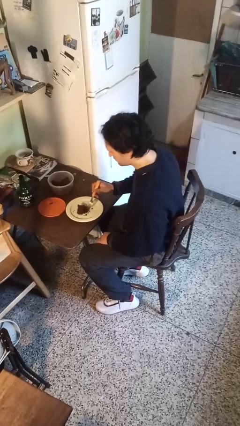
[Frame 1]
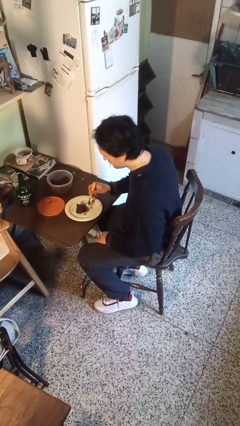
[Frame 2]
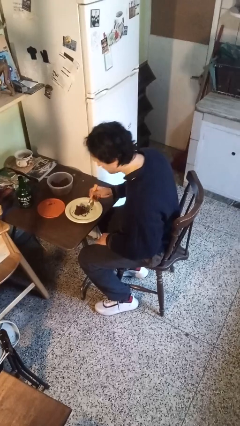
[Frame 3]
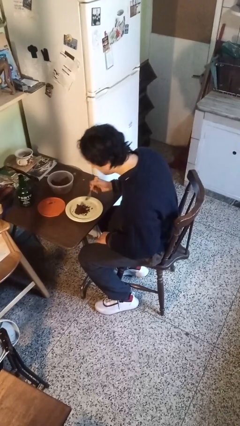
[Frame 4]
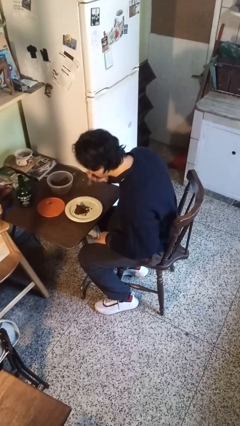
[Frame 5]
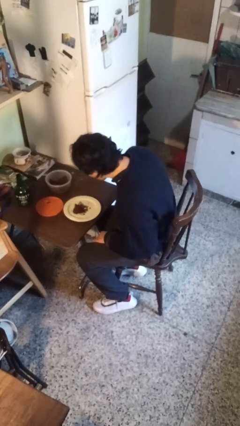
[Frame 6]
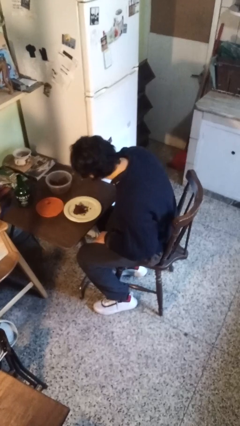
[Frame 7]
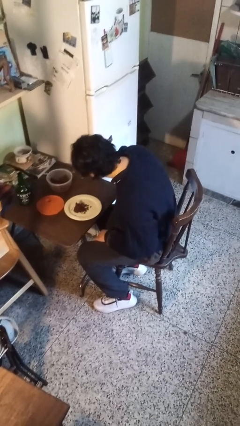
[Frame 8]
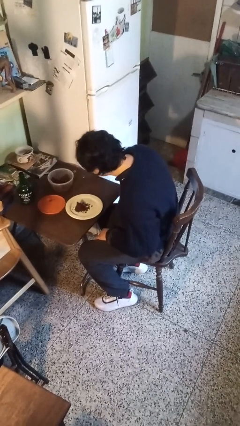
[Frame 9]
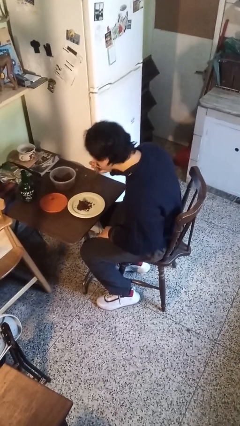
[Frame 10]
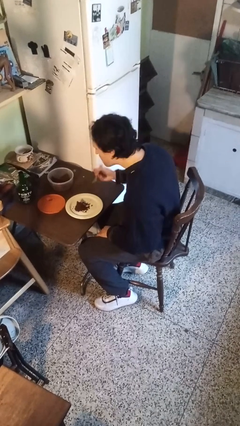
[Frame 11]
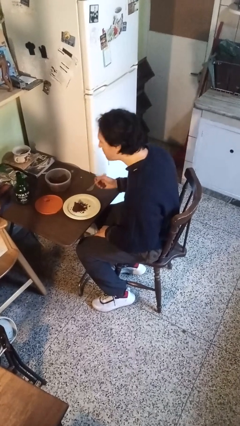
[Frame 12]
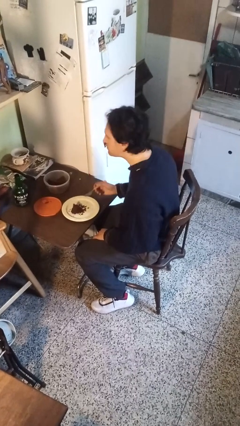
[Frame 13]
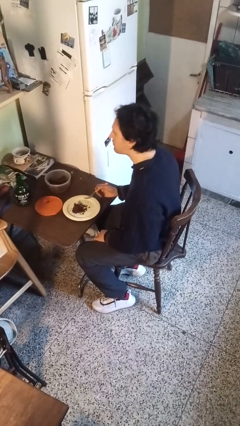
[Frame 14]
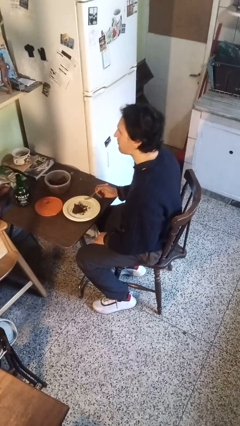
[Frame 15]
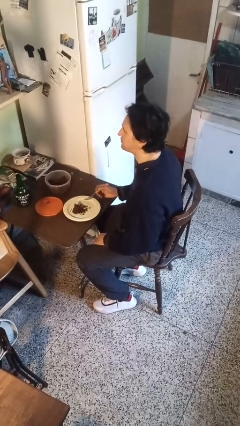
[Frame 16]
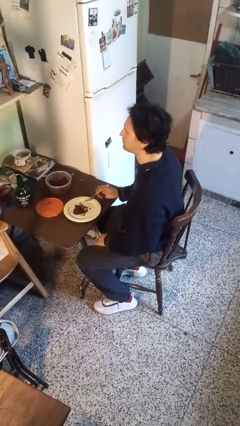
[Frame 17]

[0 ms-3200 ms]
person eats with utensil

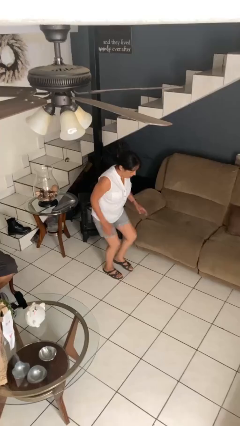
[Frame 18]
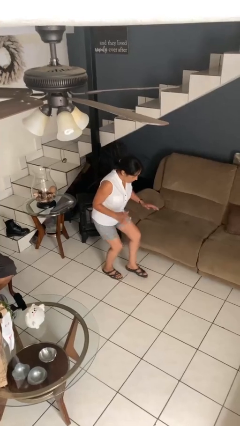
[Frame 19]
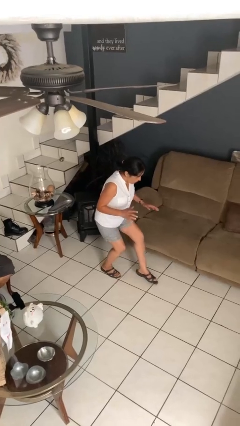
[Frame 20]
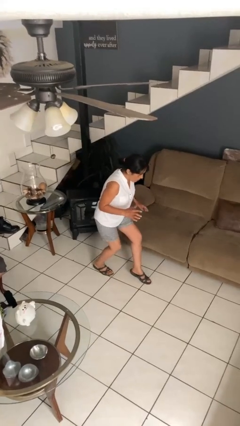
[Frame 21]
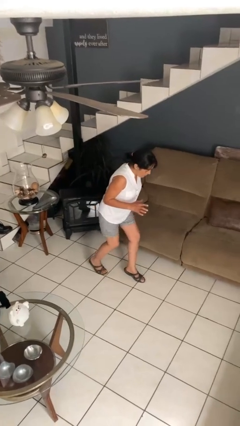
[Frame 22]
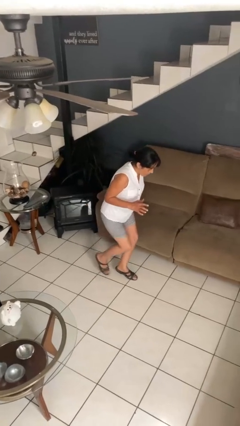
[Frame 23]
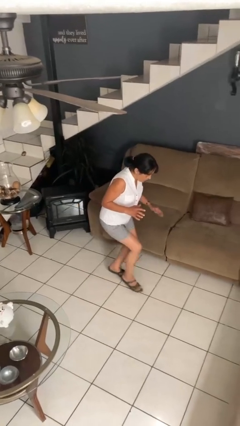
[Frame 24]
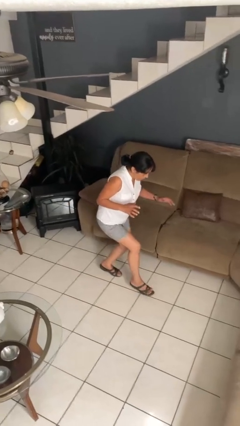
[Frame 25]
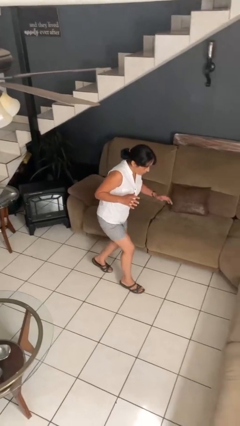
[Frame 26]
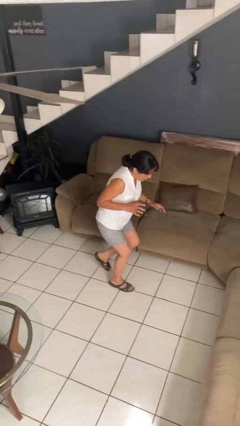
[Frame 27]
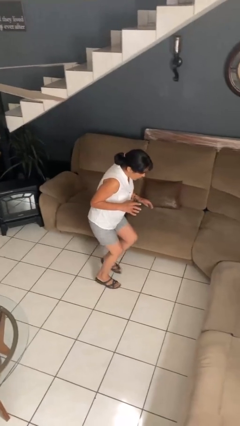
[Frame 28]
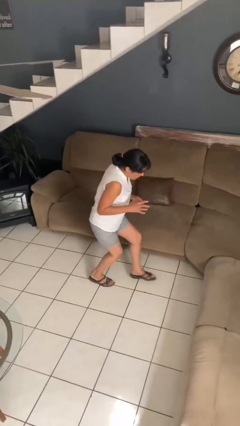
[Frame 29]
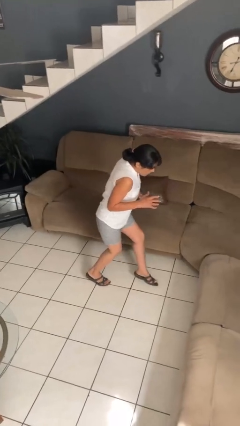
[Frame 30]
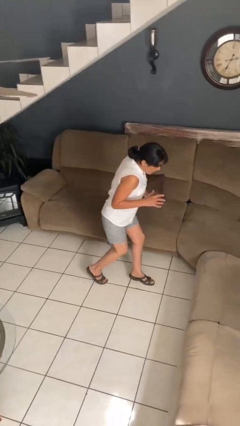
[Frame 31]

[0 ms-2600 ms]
person walks tiptoe

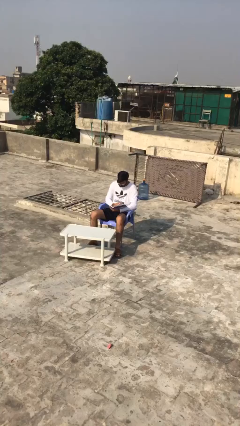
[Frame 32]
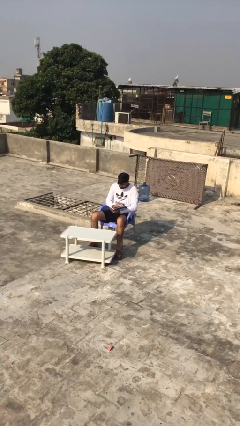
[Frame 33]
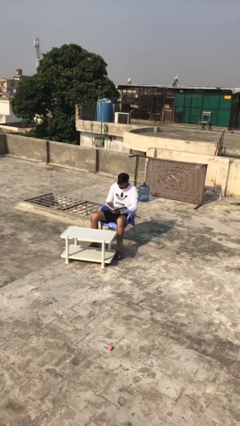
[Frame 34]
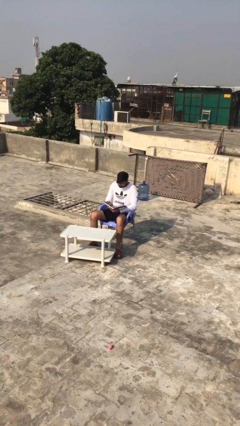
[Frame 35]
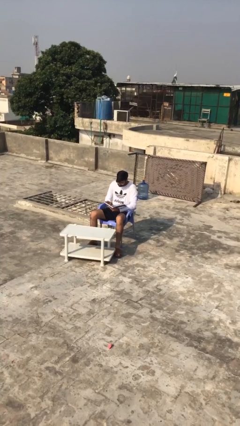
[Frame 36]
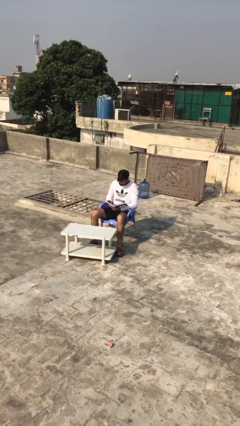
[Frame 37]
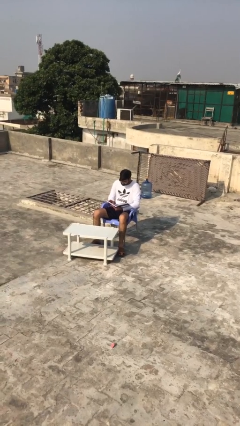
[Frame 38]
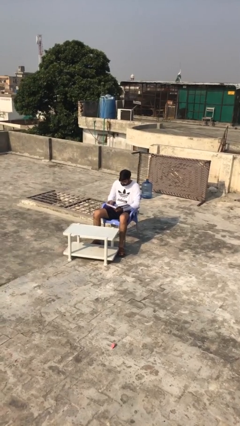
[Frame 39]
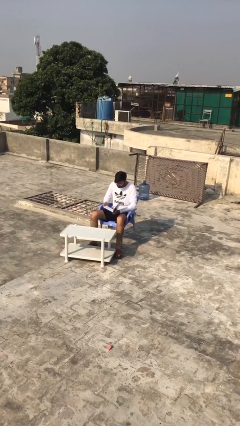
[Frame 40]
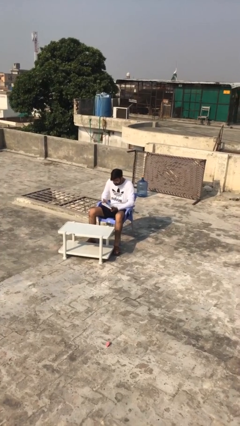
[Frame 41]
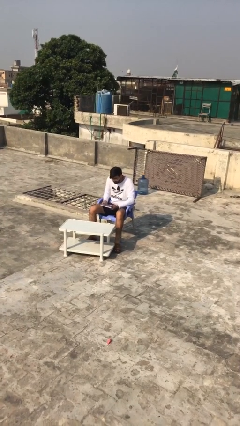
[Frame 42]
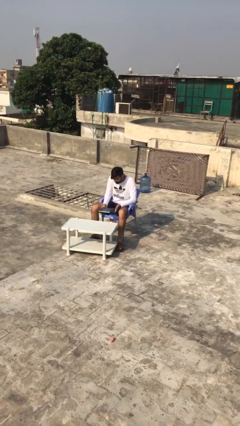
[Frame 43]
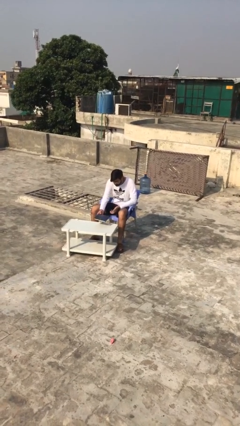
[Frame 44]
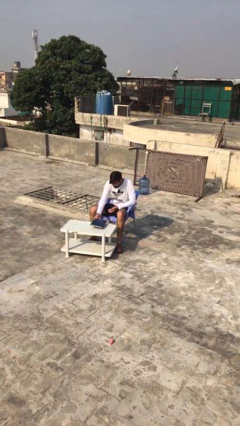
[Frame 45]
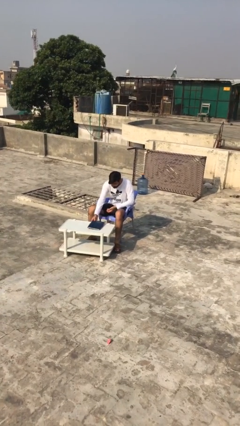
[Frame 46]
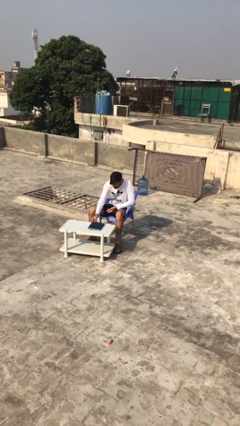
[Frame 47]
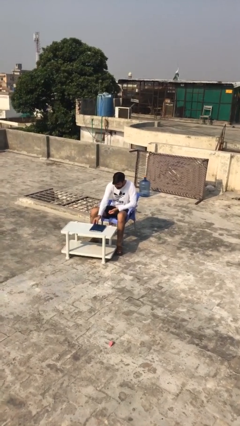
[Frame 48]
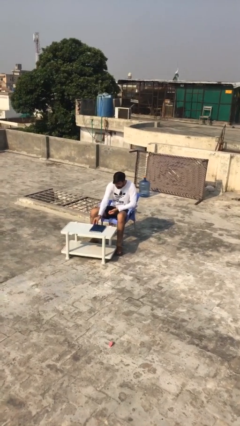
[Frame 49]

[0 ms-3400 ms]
person puts down object on table

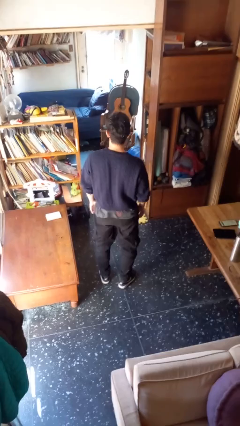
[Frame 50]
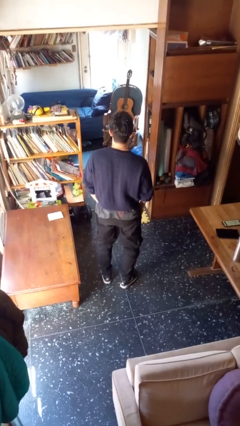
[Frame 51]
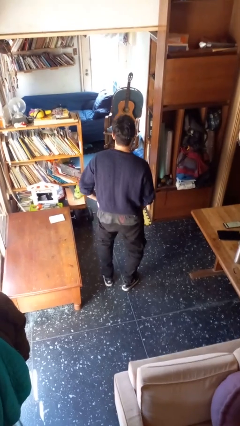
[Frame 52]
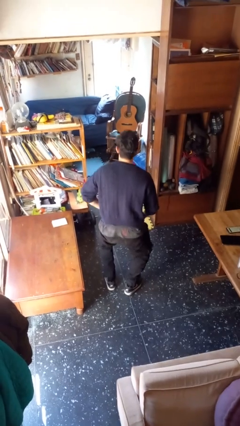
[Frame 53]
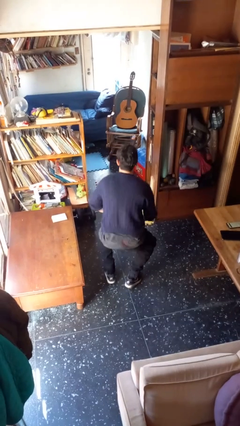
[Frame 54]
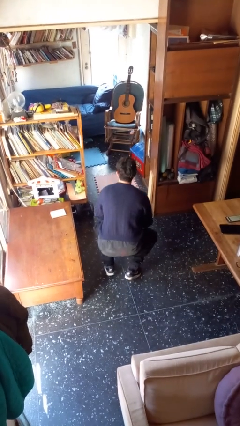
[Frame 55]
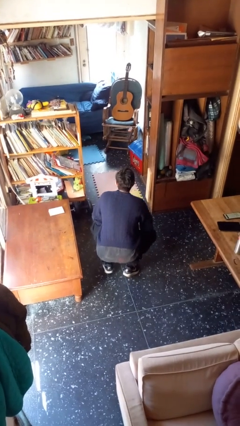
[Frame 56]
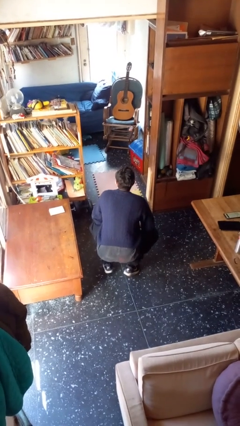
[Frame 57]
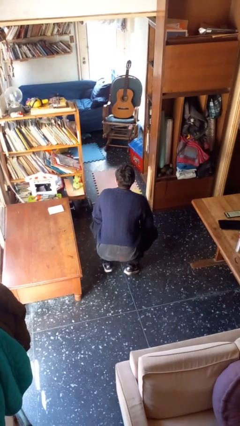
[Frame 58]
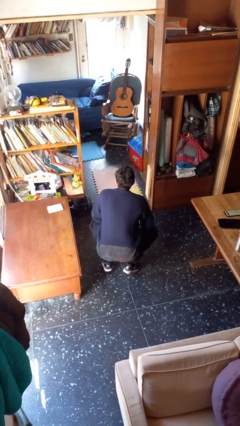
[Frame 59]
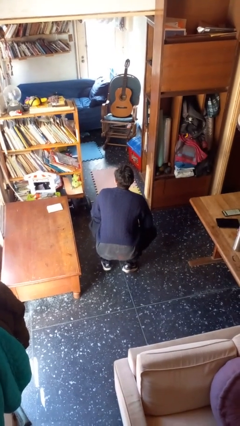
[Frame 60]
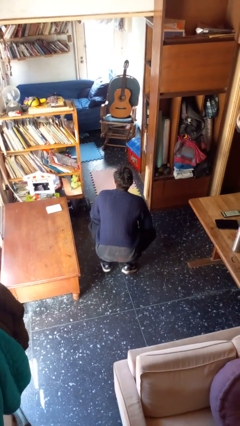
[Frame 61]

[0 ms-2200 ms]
person squats

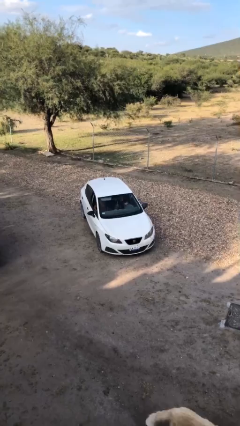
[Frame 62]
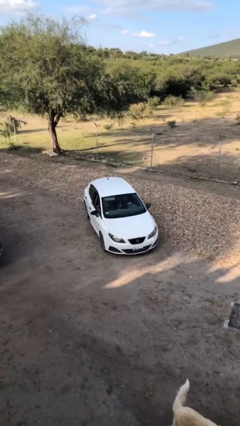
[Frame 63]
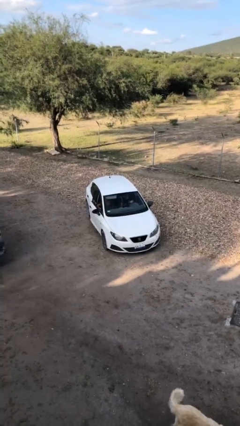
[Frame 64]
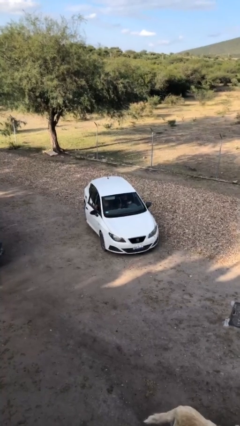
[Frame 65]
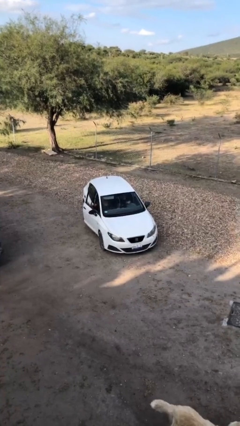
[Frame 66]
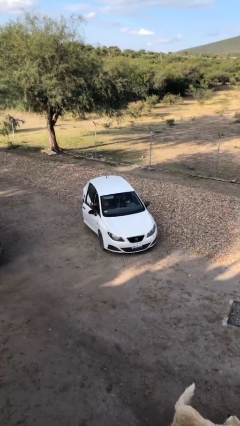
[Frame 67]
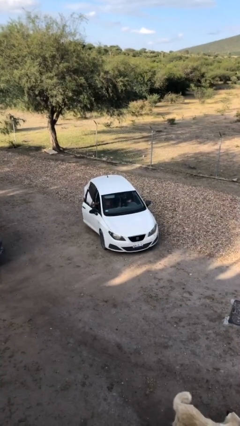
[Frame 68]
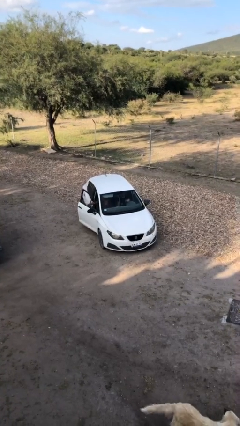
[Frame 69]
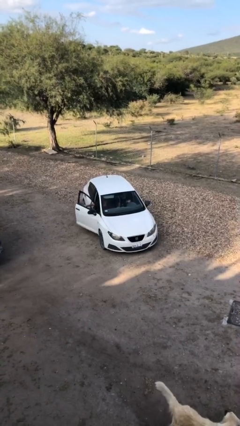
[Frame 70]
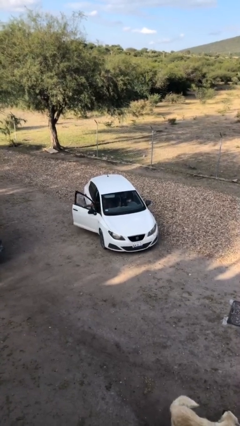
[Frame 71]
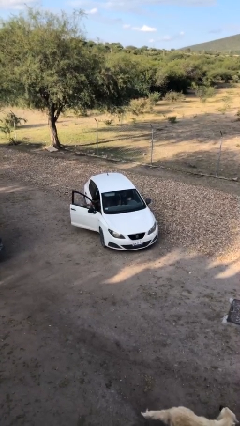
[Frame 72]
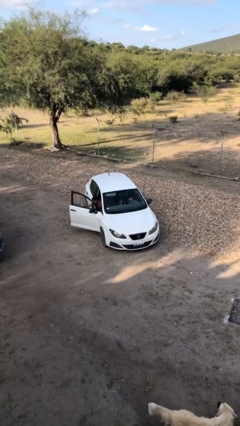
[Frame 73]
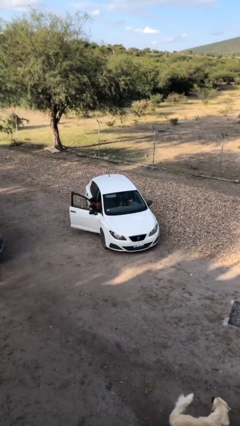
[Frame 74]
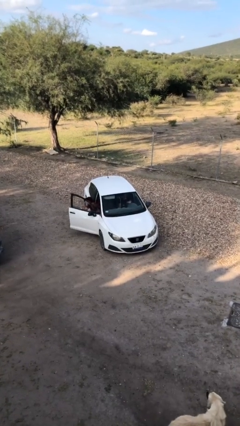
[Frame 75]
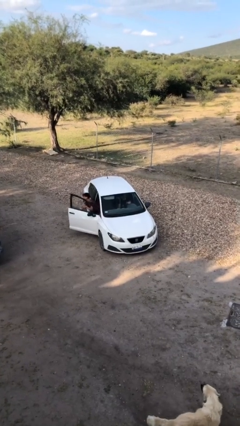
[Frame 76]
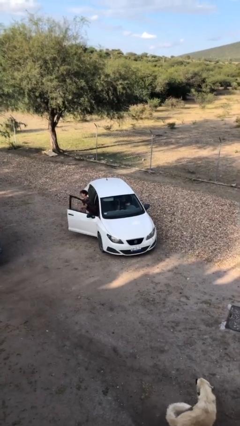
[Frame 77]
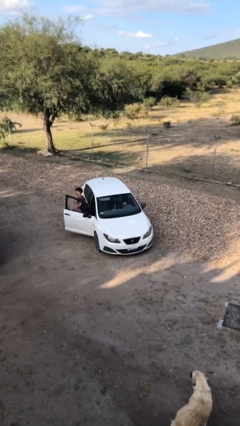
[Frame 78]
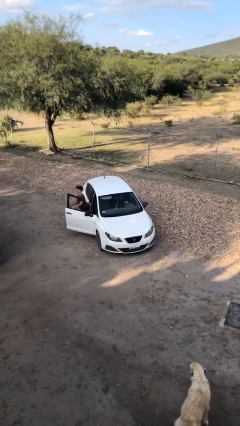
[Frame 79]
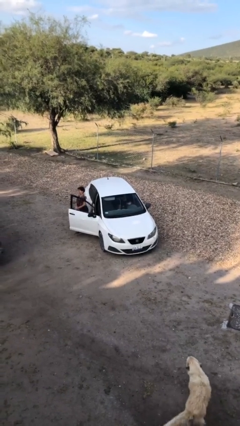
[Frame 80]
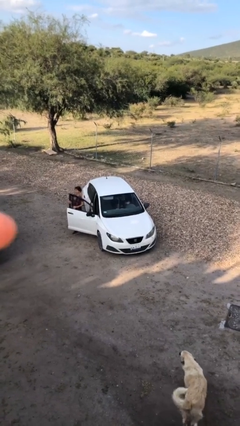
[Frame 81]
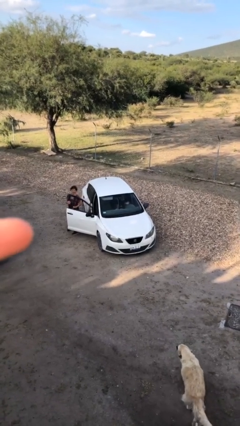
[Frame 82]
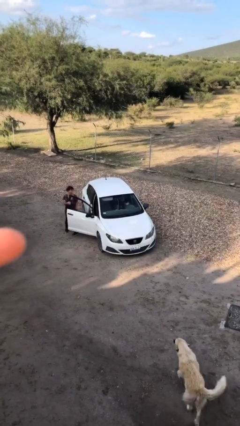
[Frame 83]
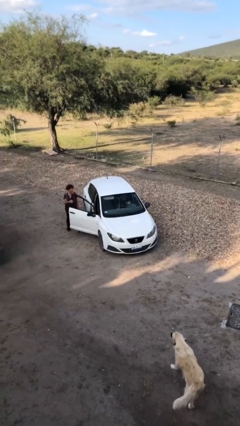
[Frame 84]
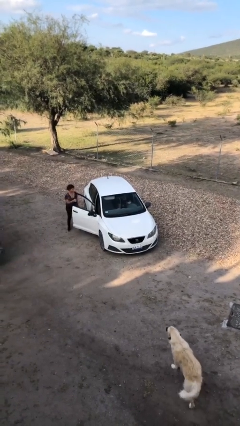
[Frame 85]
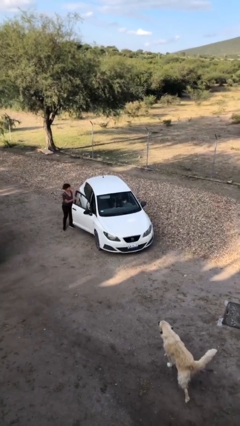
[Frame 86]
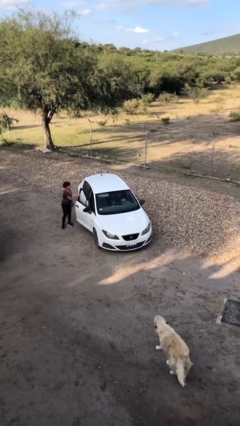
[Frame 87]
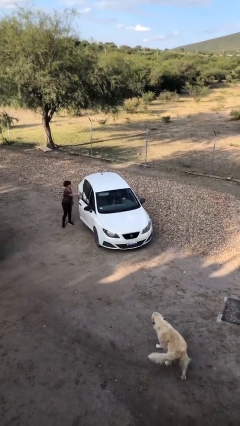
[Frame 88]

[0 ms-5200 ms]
car drops off person

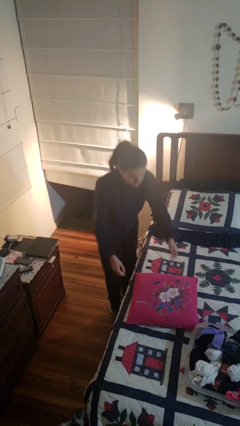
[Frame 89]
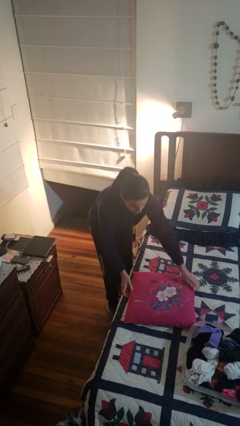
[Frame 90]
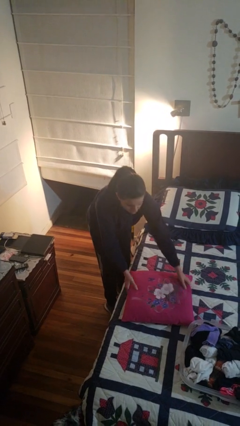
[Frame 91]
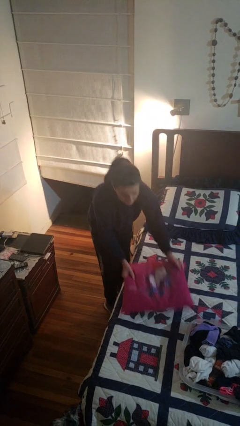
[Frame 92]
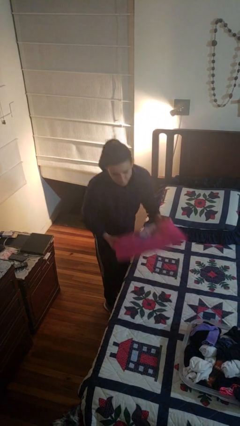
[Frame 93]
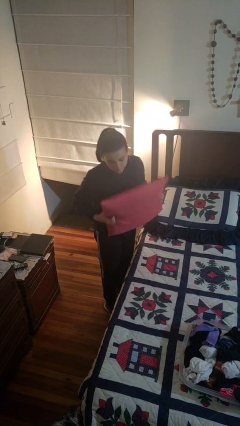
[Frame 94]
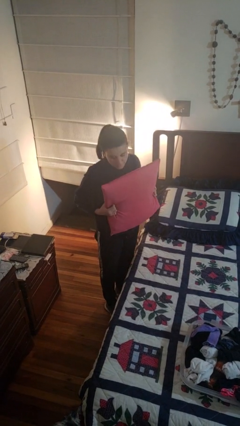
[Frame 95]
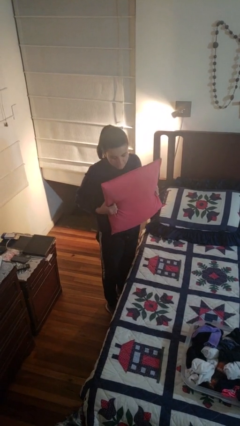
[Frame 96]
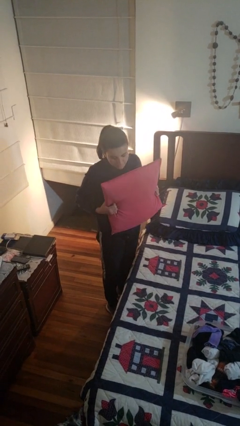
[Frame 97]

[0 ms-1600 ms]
person picks up object from bed
